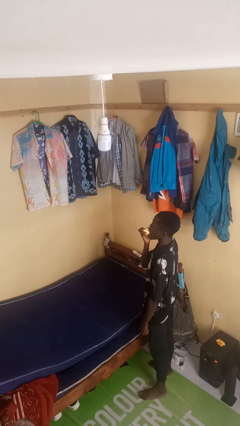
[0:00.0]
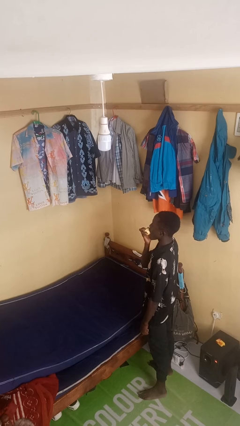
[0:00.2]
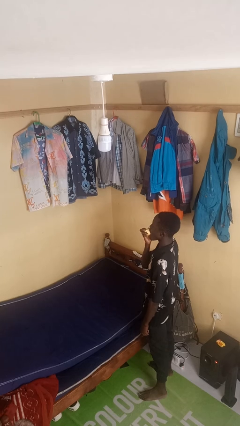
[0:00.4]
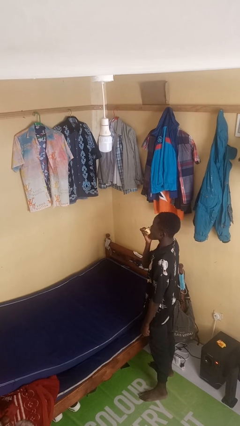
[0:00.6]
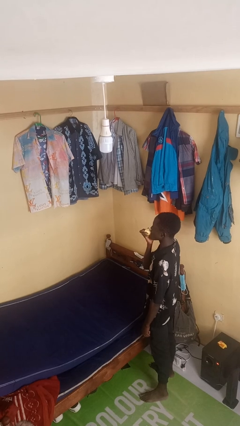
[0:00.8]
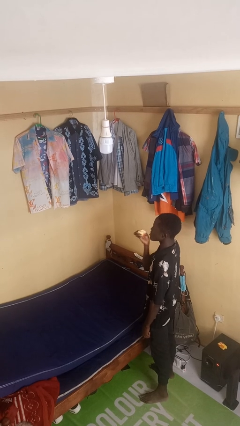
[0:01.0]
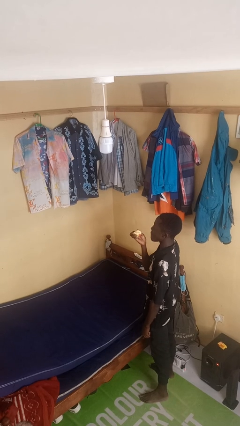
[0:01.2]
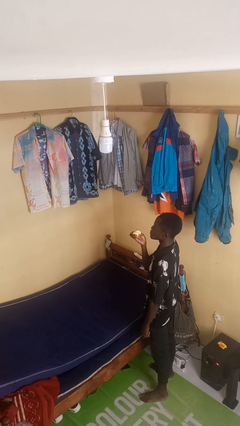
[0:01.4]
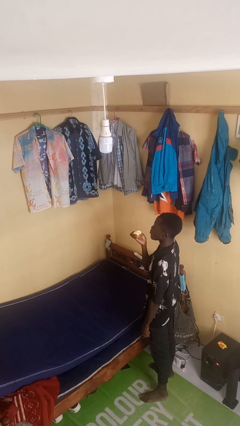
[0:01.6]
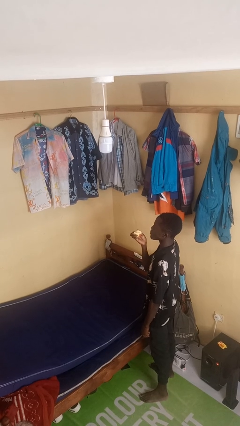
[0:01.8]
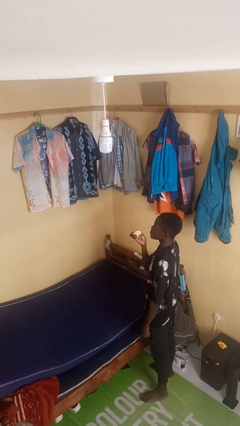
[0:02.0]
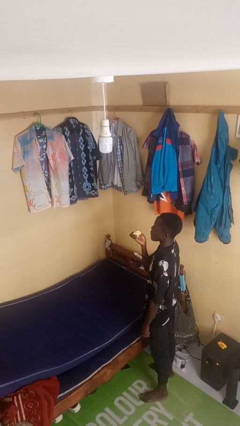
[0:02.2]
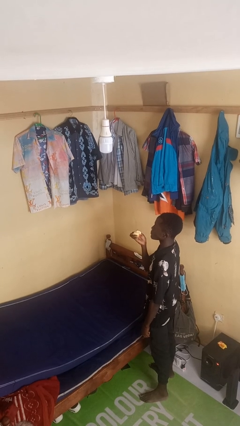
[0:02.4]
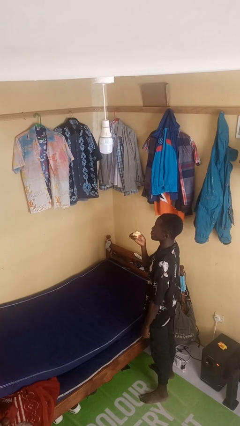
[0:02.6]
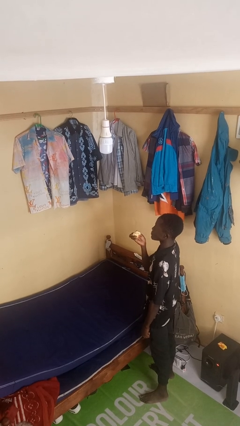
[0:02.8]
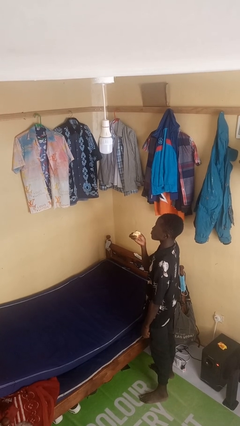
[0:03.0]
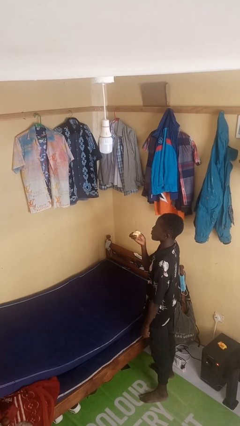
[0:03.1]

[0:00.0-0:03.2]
person eats apple

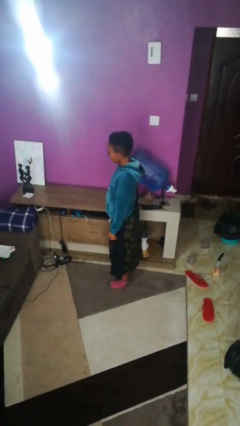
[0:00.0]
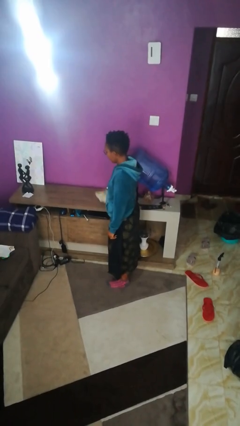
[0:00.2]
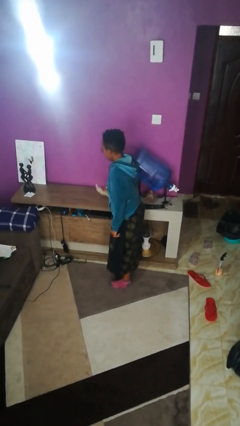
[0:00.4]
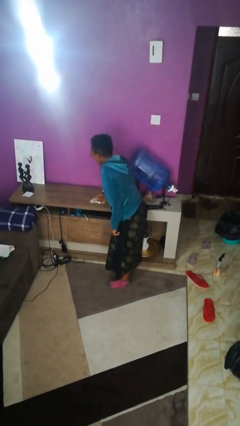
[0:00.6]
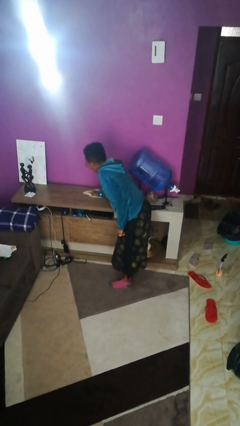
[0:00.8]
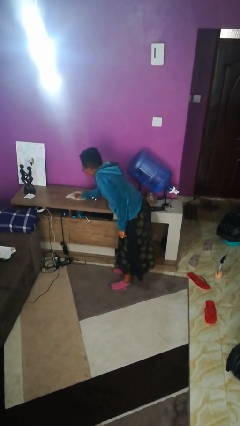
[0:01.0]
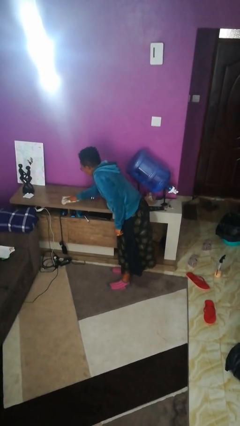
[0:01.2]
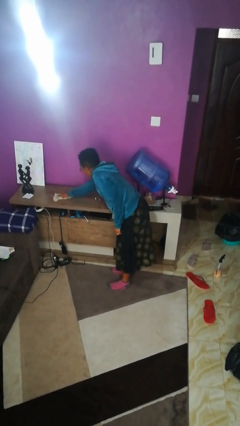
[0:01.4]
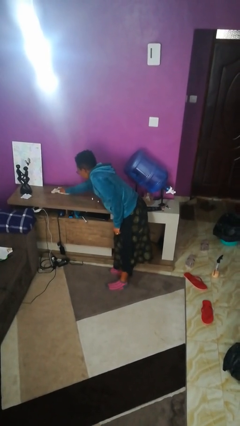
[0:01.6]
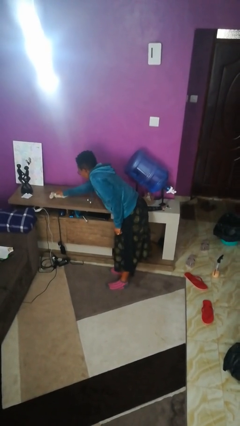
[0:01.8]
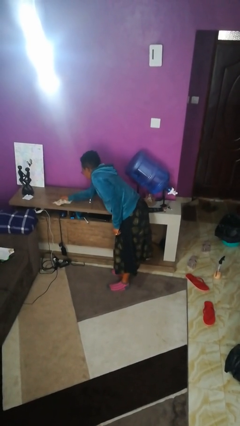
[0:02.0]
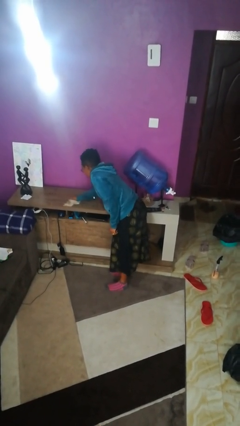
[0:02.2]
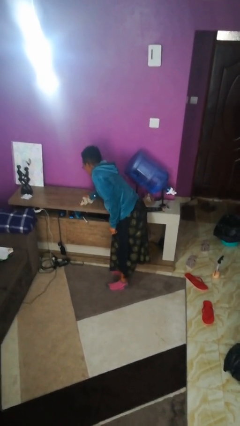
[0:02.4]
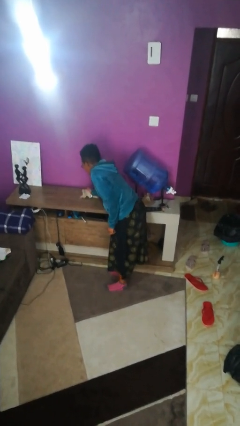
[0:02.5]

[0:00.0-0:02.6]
person cleans table with rag

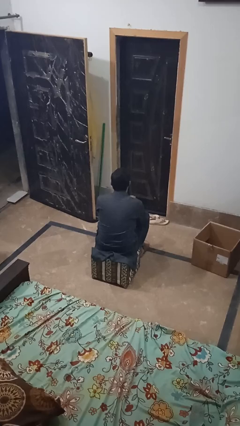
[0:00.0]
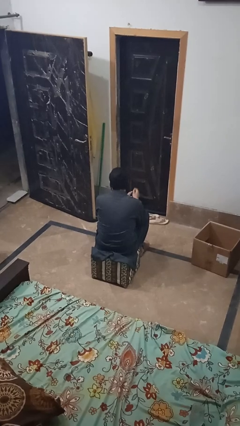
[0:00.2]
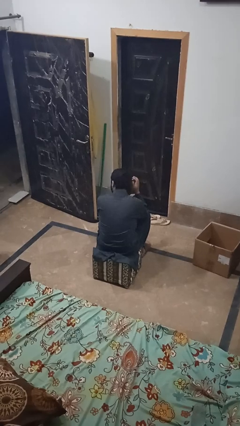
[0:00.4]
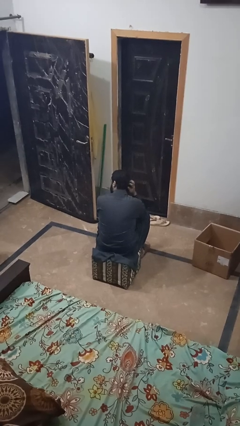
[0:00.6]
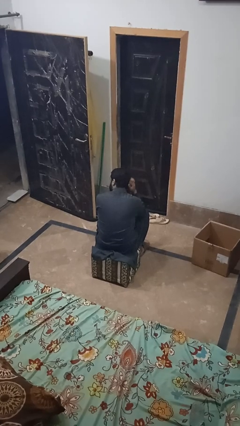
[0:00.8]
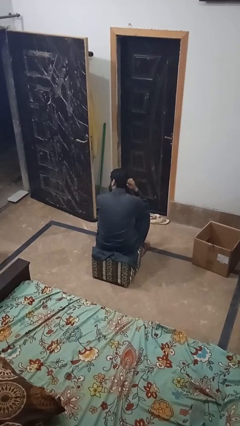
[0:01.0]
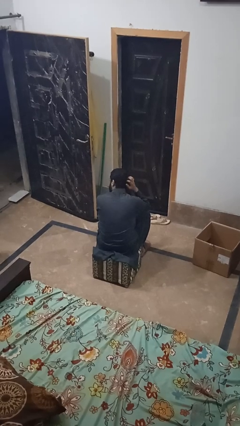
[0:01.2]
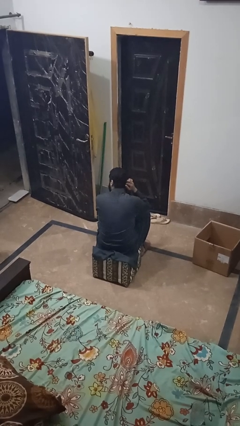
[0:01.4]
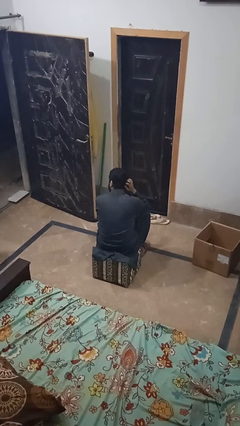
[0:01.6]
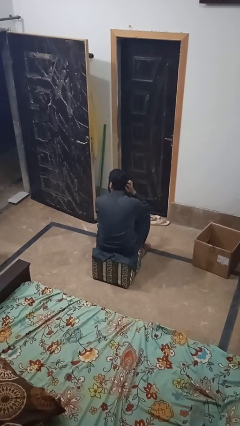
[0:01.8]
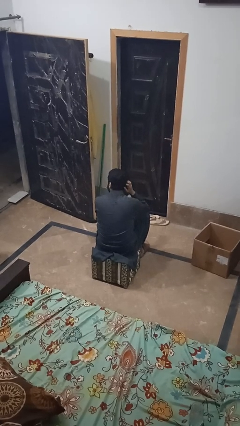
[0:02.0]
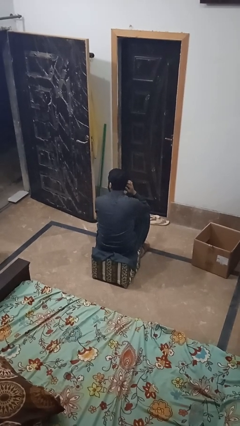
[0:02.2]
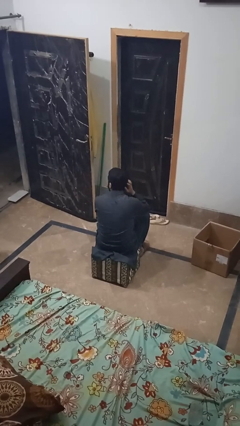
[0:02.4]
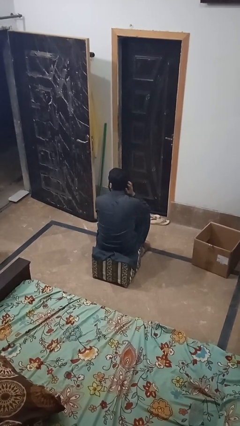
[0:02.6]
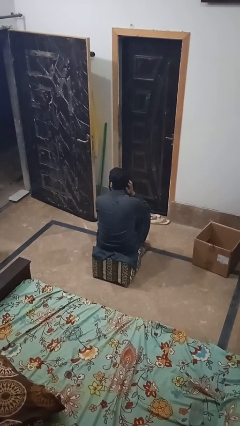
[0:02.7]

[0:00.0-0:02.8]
person strokes hair

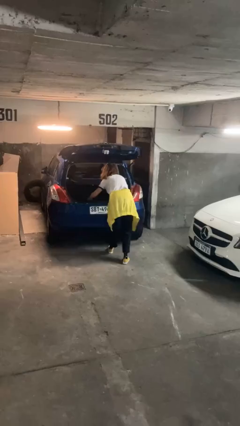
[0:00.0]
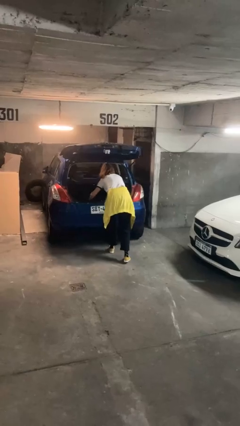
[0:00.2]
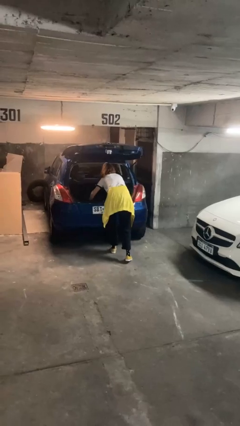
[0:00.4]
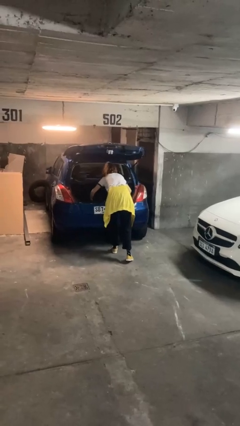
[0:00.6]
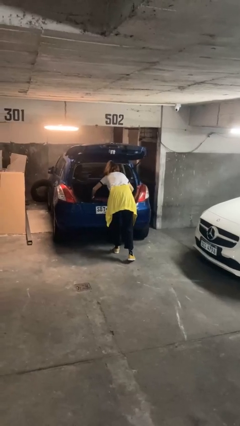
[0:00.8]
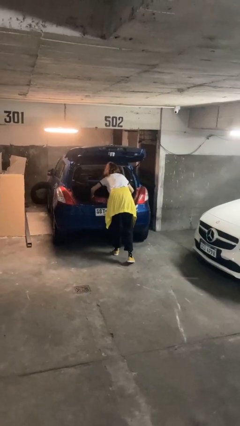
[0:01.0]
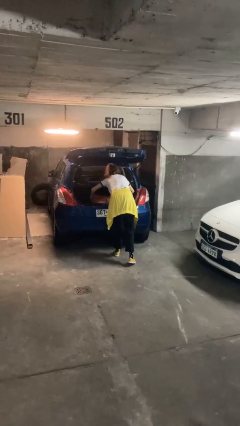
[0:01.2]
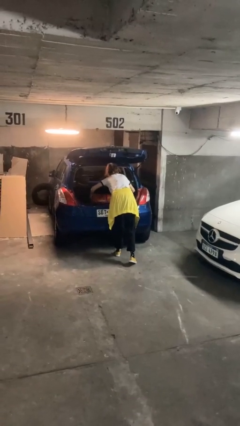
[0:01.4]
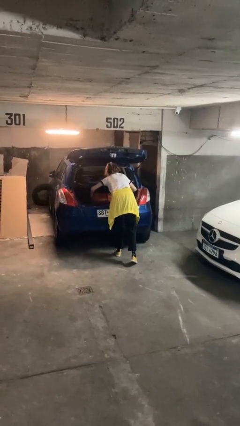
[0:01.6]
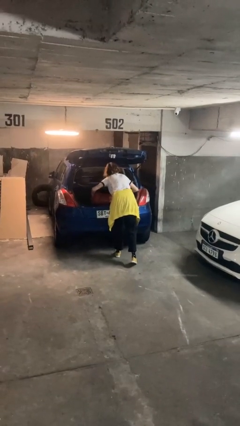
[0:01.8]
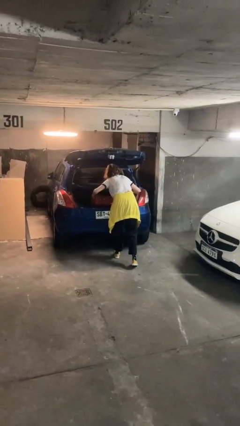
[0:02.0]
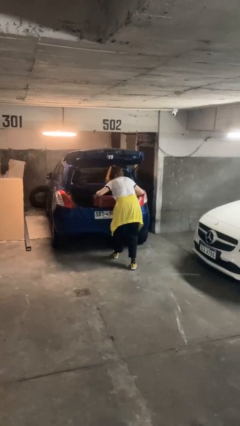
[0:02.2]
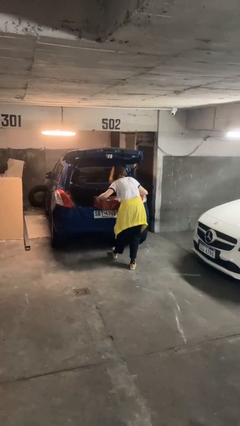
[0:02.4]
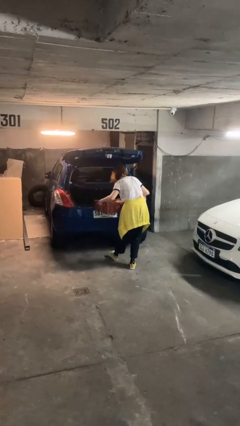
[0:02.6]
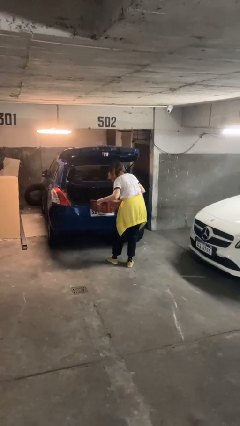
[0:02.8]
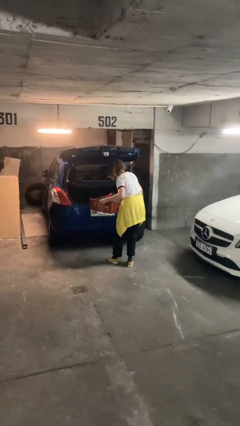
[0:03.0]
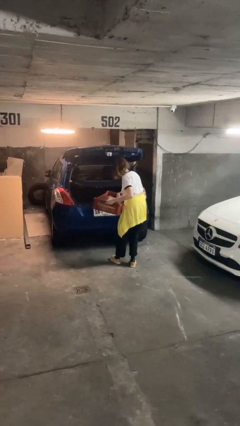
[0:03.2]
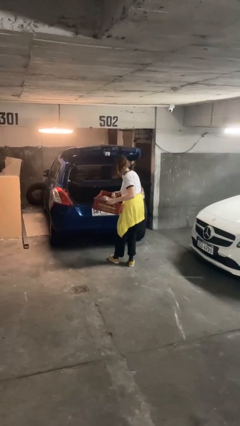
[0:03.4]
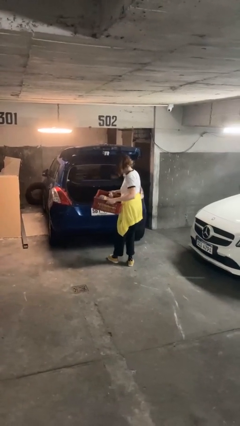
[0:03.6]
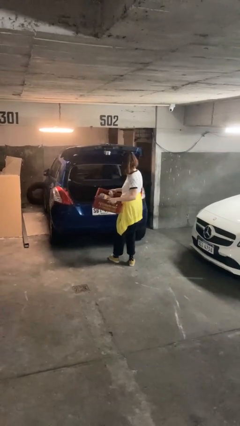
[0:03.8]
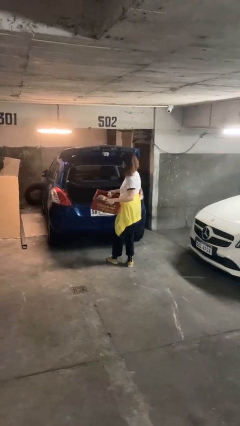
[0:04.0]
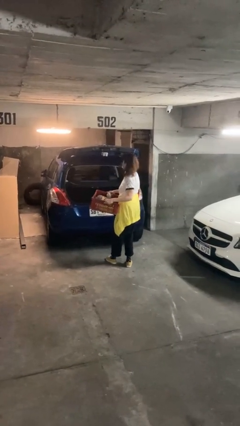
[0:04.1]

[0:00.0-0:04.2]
person unloads car

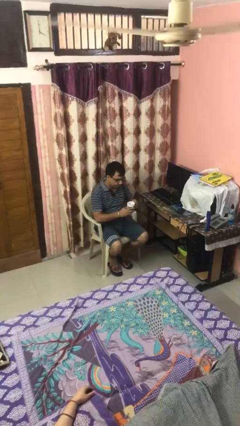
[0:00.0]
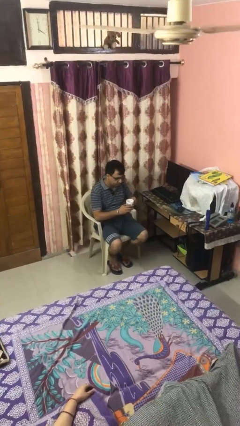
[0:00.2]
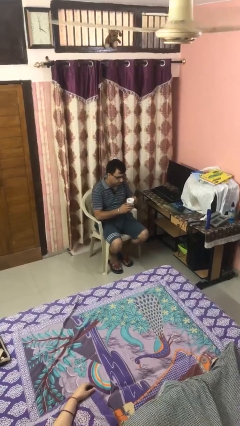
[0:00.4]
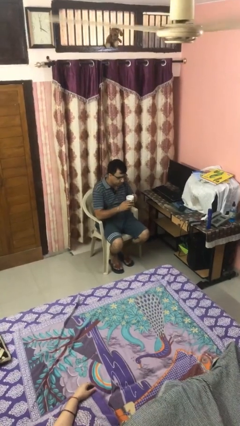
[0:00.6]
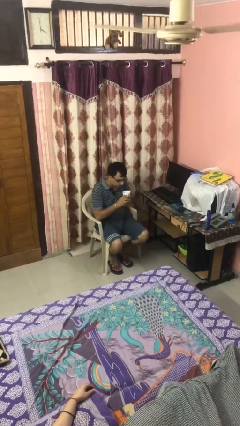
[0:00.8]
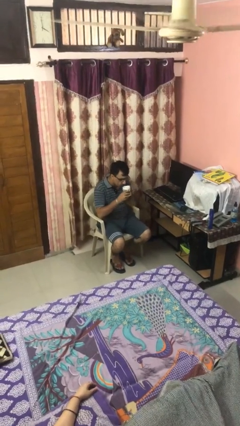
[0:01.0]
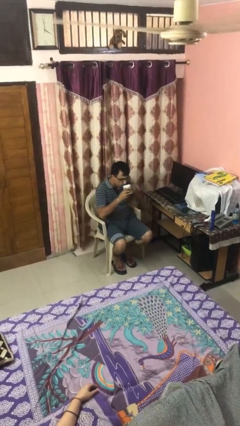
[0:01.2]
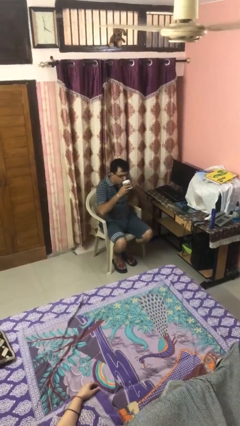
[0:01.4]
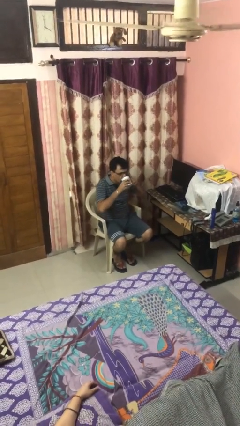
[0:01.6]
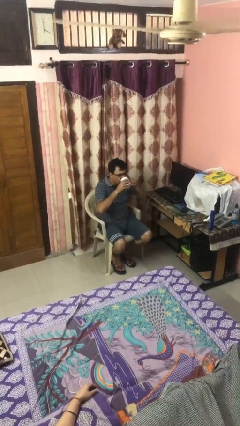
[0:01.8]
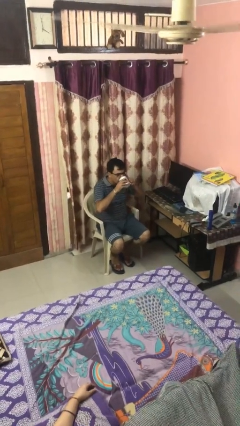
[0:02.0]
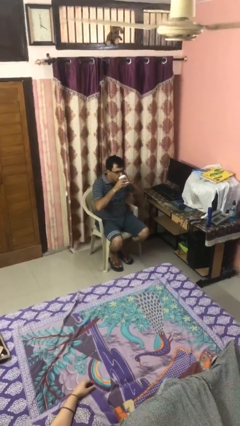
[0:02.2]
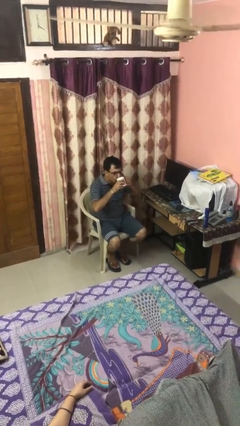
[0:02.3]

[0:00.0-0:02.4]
person drinks from mug

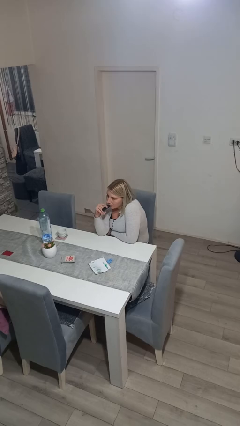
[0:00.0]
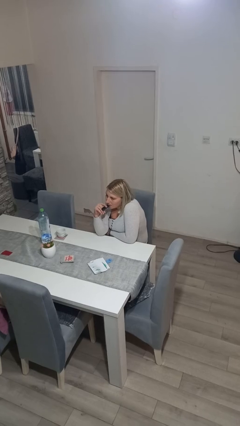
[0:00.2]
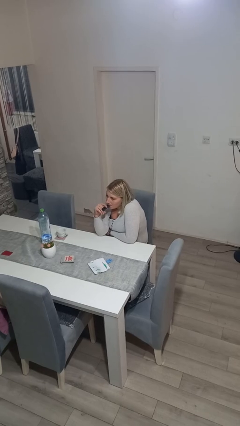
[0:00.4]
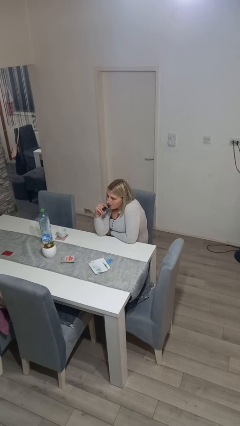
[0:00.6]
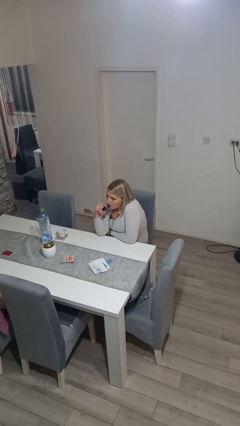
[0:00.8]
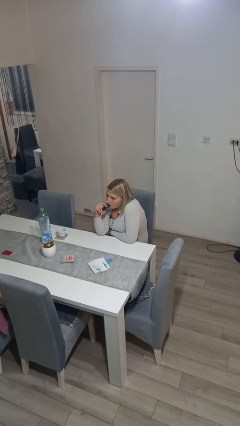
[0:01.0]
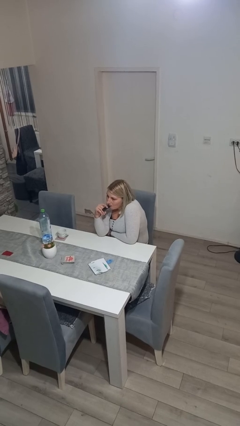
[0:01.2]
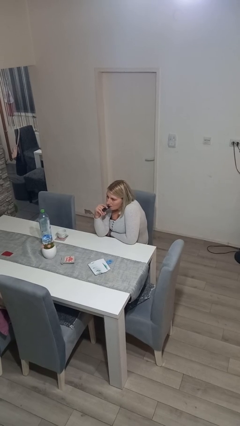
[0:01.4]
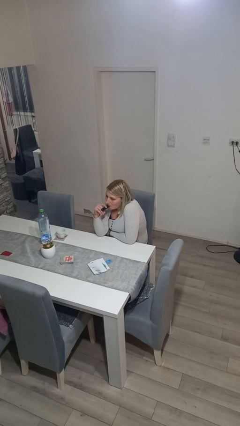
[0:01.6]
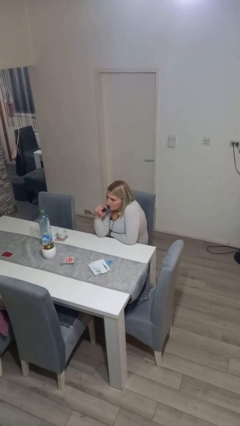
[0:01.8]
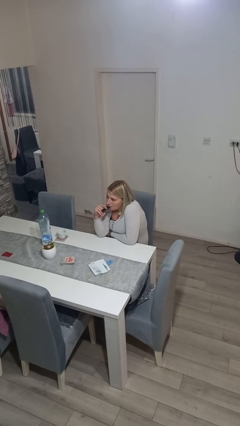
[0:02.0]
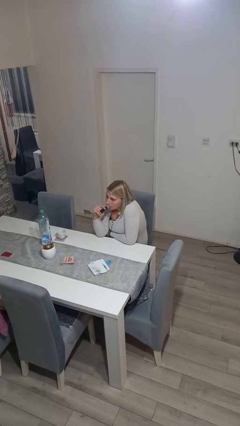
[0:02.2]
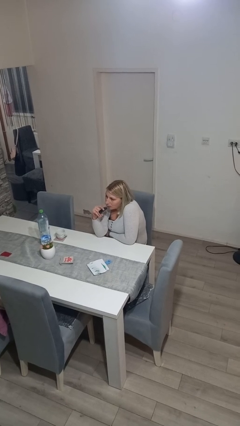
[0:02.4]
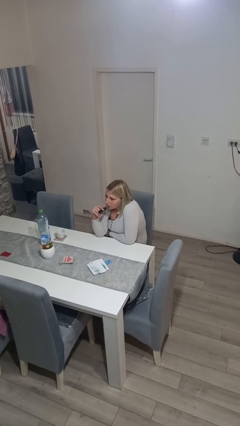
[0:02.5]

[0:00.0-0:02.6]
person vapes
